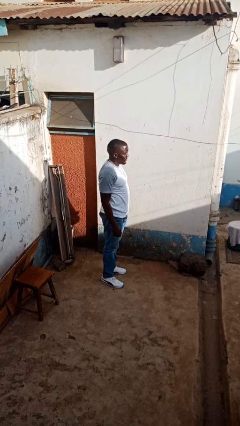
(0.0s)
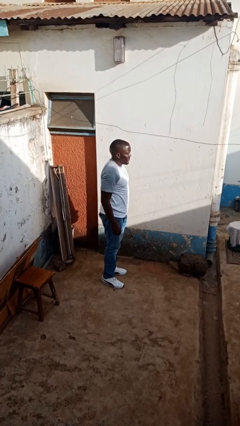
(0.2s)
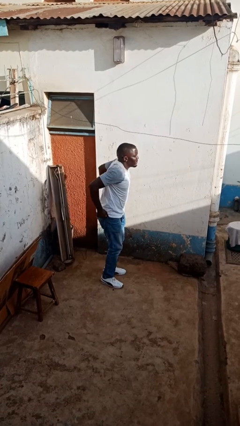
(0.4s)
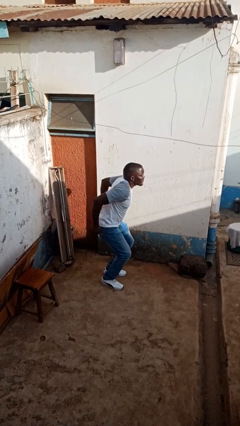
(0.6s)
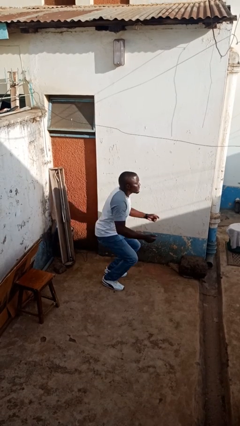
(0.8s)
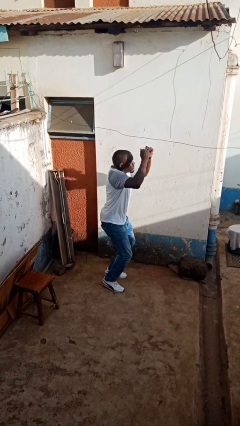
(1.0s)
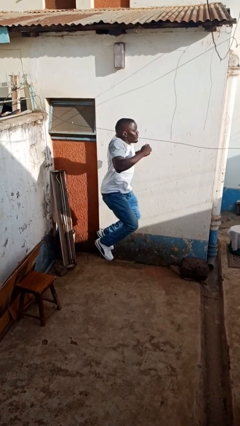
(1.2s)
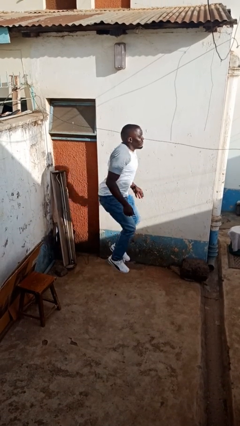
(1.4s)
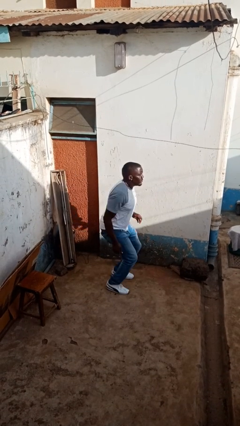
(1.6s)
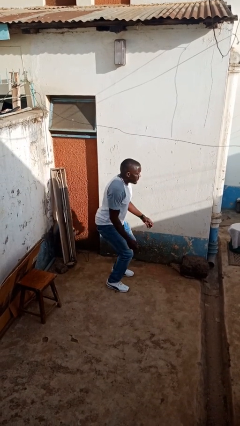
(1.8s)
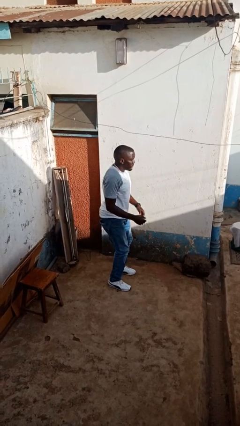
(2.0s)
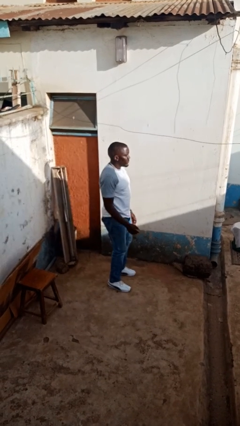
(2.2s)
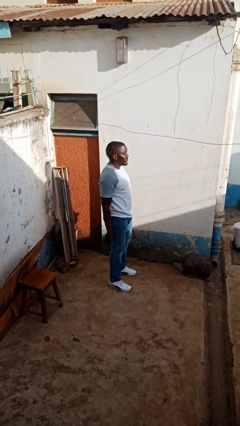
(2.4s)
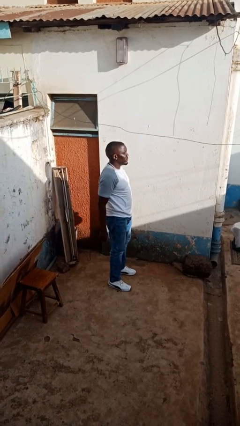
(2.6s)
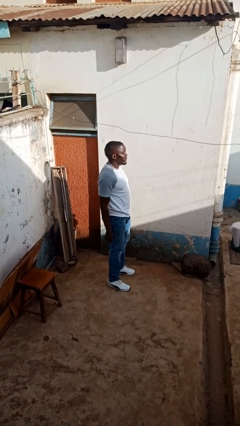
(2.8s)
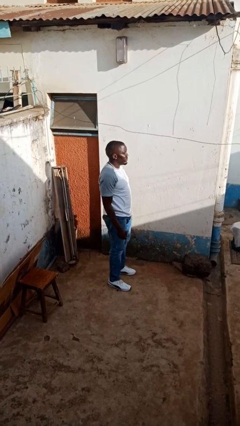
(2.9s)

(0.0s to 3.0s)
person jumps

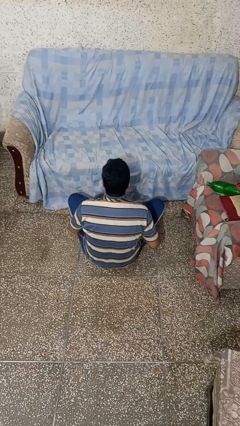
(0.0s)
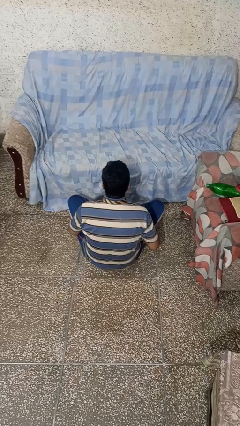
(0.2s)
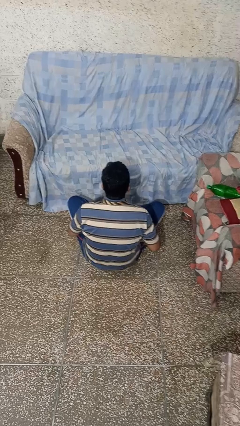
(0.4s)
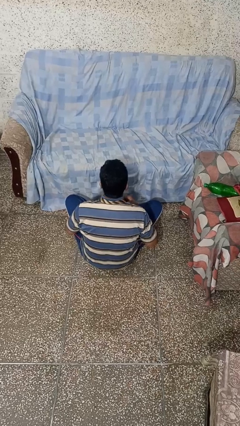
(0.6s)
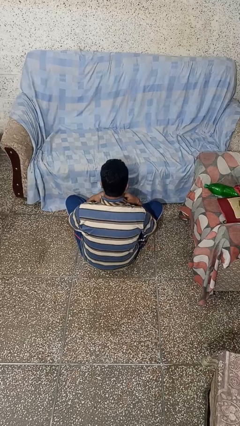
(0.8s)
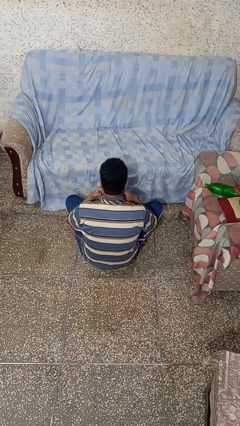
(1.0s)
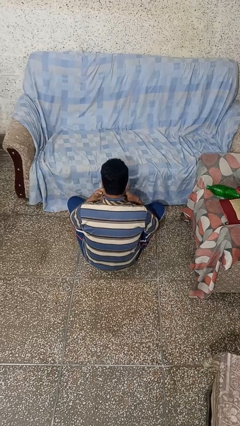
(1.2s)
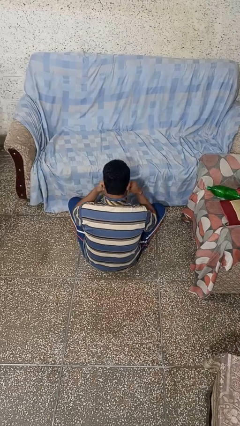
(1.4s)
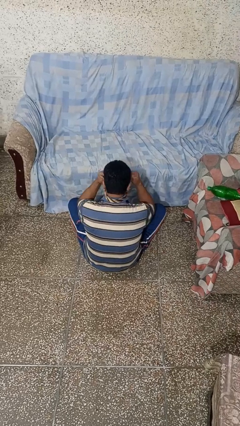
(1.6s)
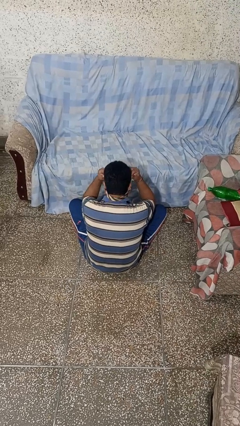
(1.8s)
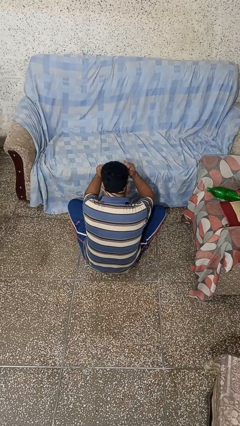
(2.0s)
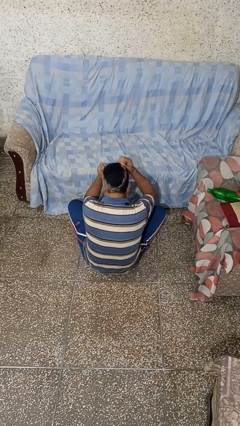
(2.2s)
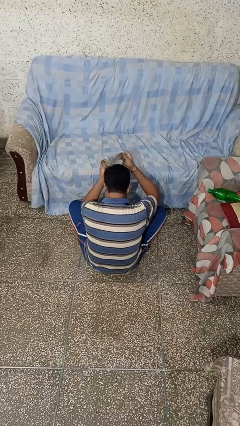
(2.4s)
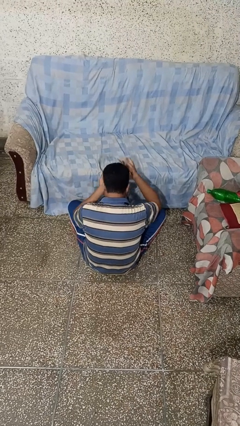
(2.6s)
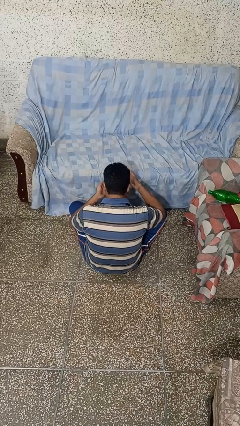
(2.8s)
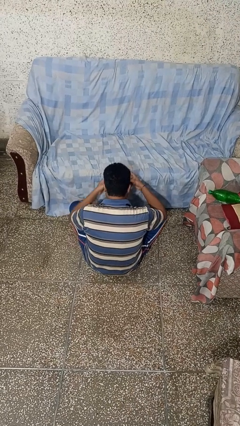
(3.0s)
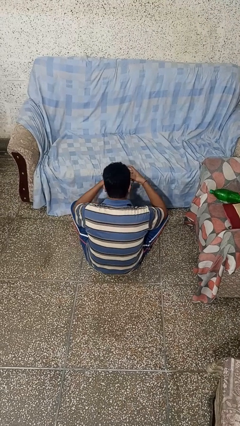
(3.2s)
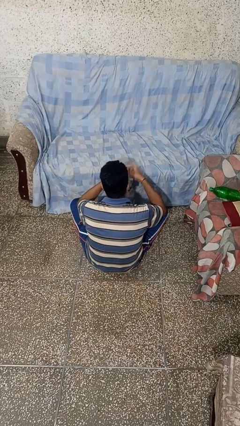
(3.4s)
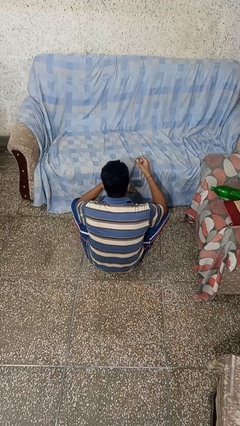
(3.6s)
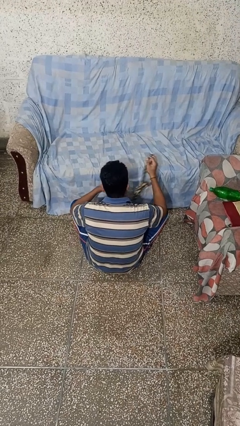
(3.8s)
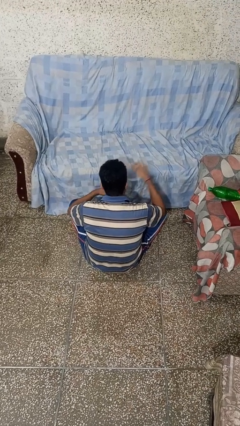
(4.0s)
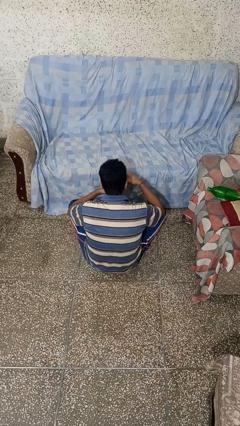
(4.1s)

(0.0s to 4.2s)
person takes off necktie

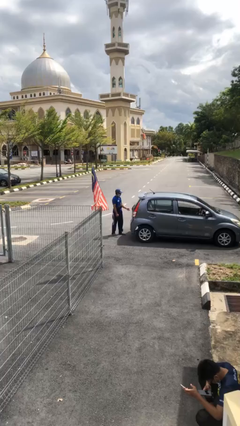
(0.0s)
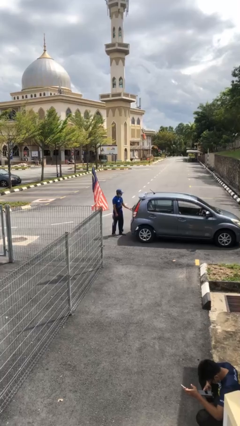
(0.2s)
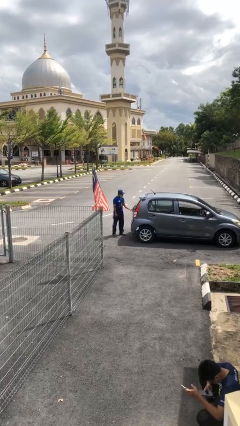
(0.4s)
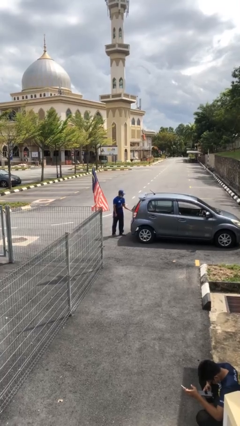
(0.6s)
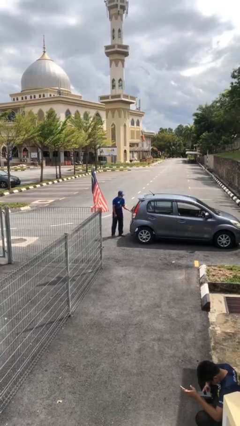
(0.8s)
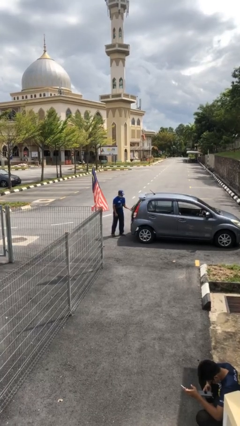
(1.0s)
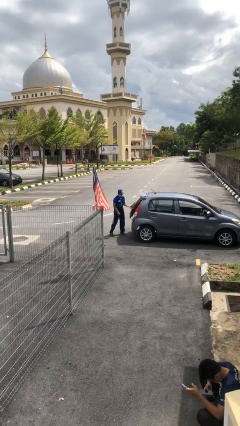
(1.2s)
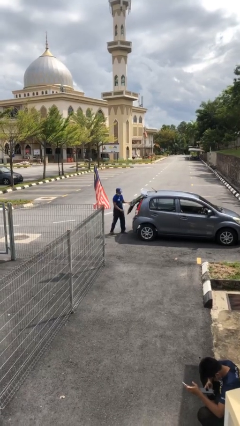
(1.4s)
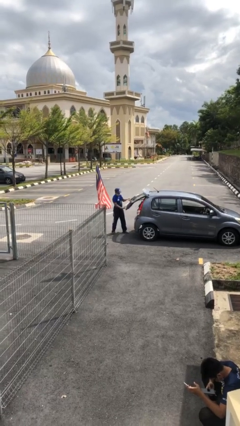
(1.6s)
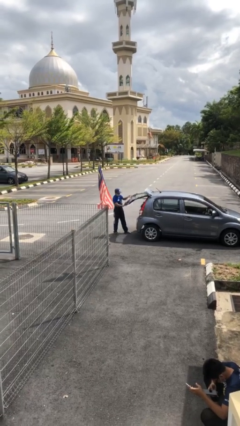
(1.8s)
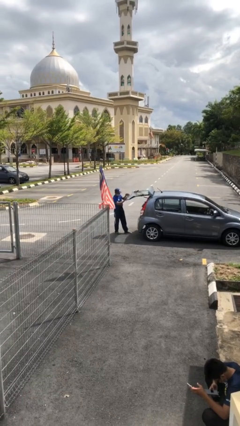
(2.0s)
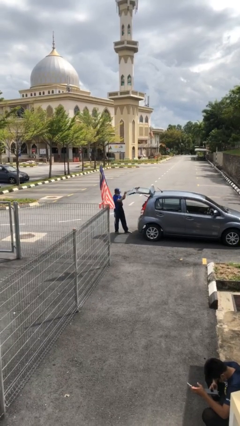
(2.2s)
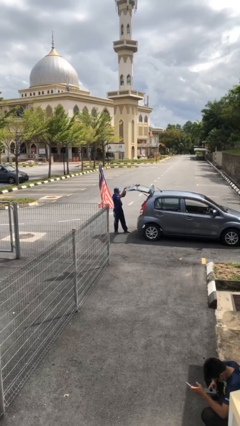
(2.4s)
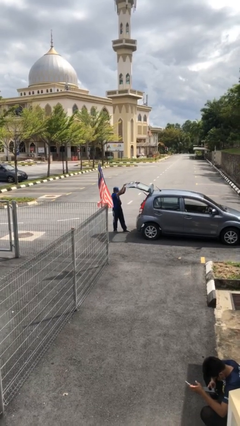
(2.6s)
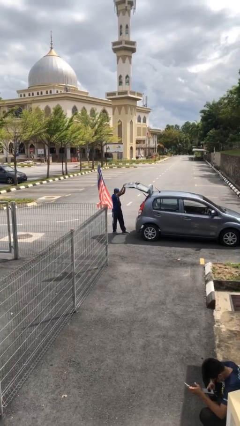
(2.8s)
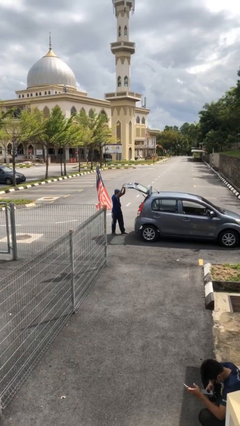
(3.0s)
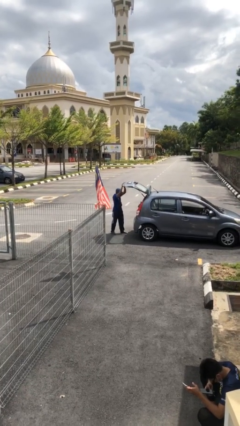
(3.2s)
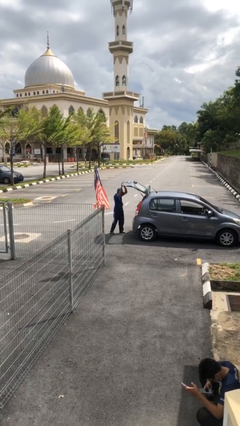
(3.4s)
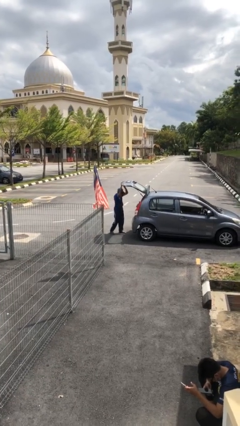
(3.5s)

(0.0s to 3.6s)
person opens car trunk

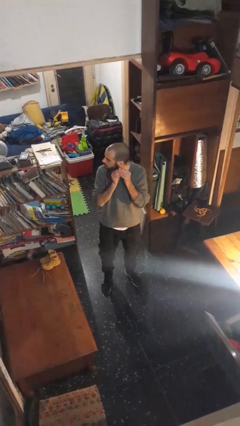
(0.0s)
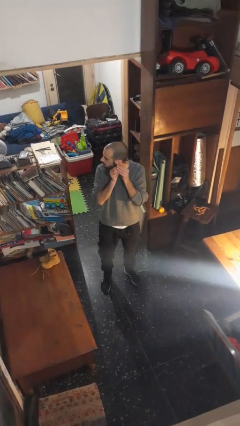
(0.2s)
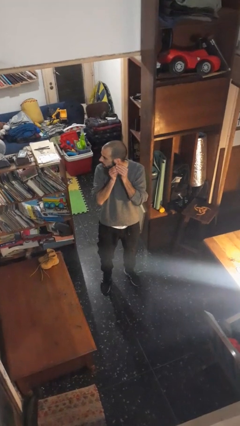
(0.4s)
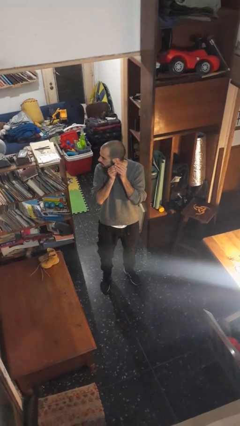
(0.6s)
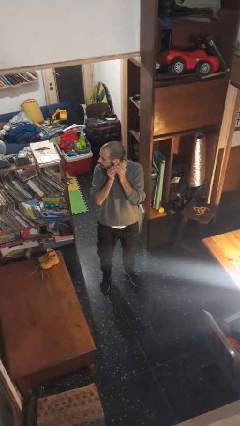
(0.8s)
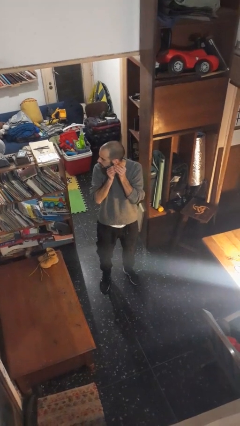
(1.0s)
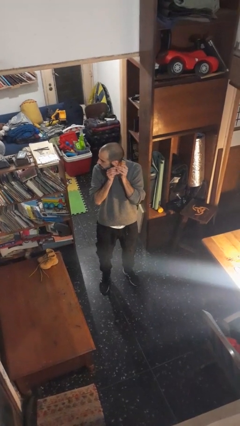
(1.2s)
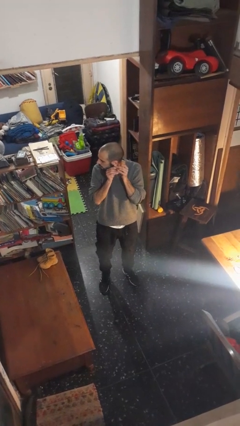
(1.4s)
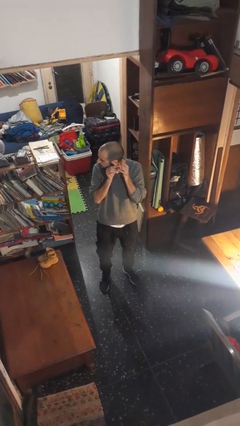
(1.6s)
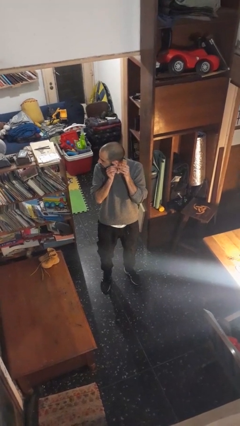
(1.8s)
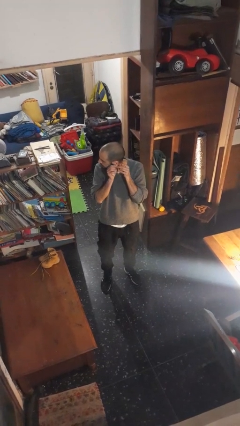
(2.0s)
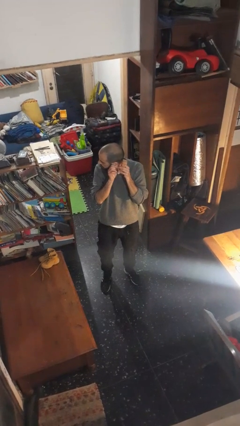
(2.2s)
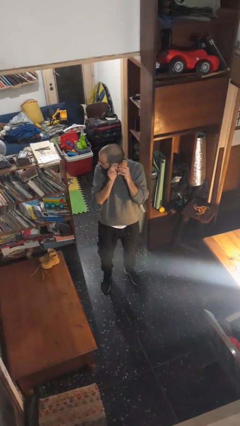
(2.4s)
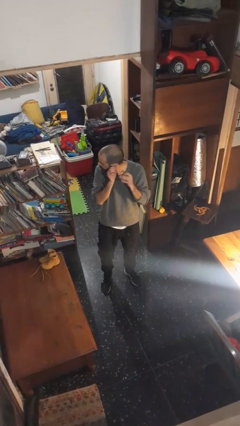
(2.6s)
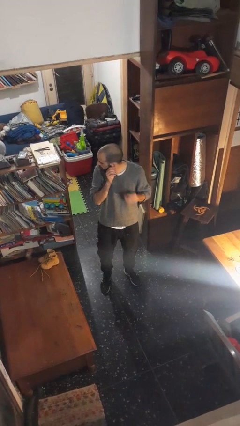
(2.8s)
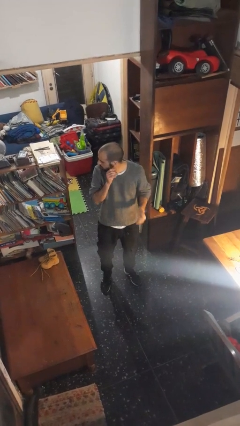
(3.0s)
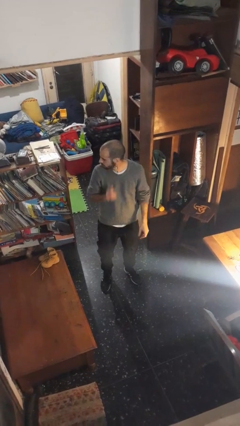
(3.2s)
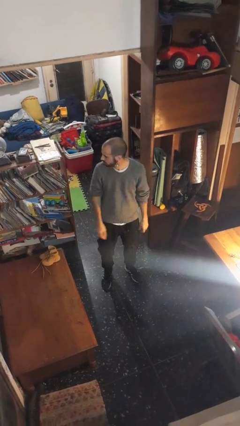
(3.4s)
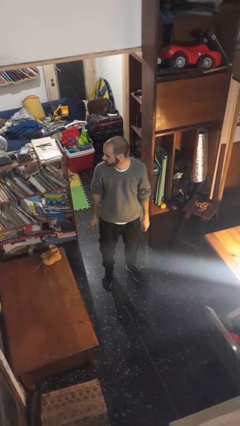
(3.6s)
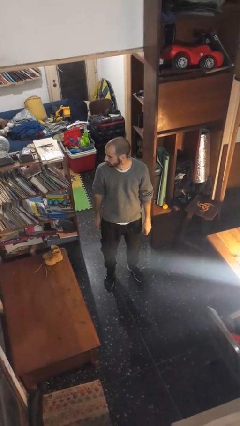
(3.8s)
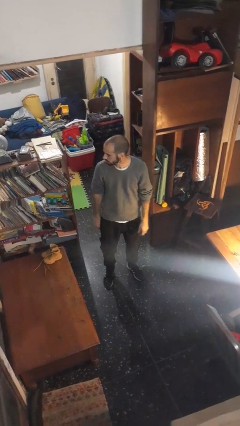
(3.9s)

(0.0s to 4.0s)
person puts on earrings

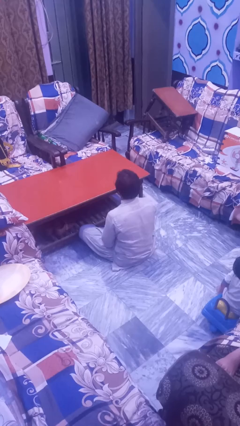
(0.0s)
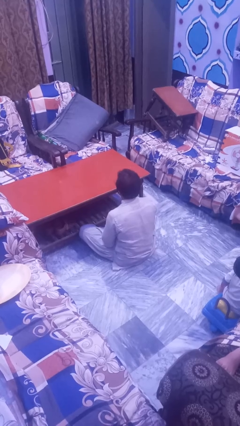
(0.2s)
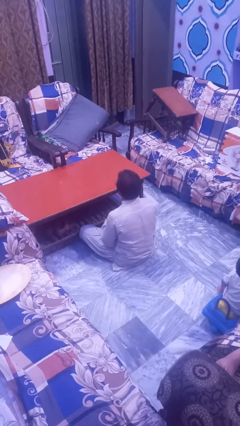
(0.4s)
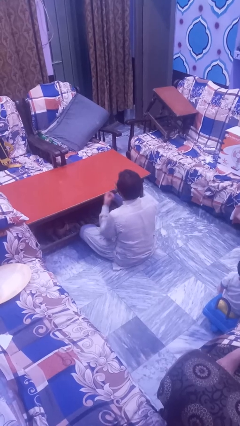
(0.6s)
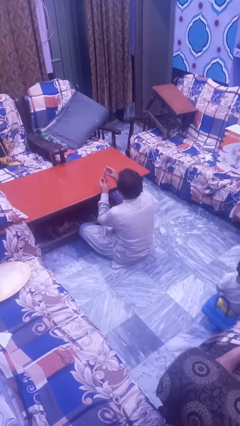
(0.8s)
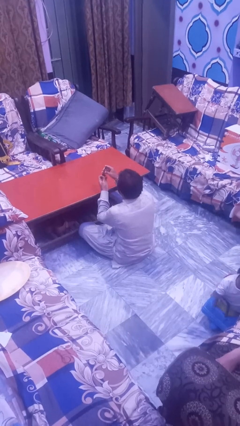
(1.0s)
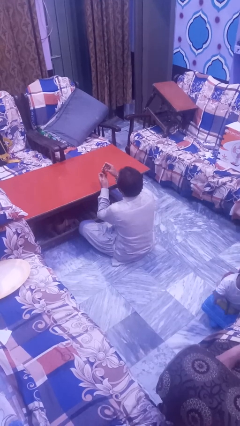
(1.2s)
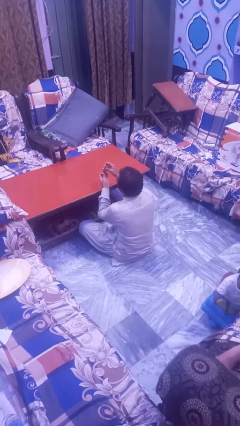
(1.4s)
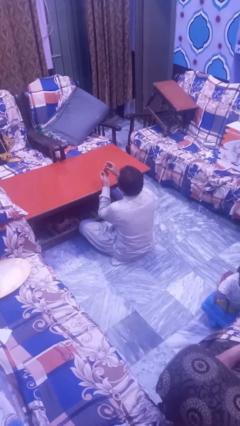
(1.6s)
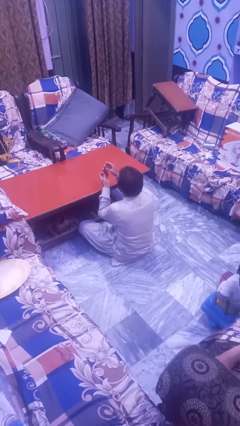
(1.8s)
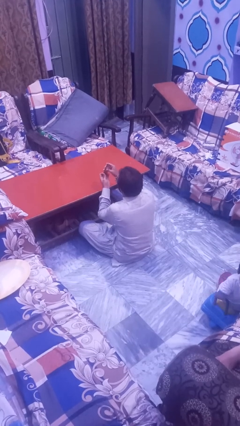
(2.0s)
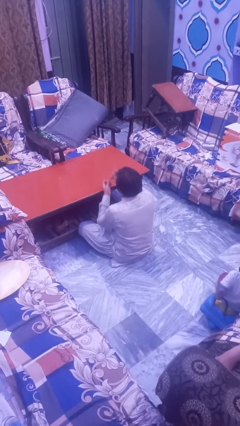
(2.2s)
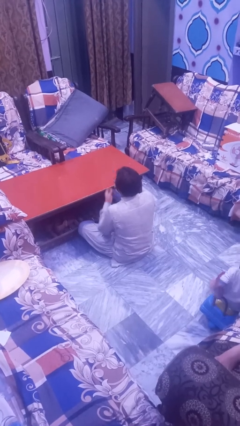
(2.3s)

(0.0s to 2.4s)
person clips fingernails

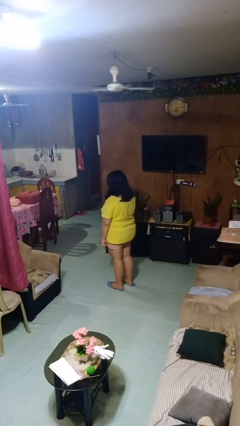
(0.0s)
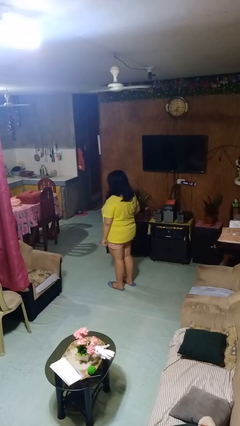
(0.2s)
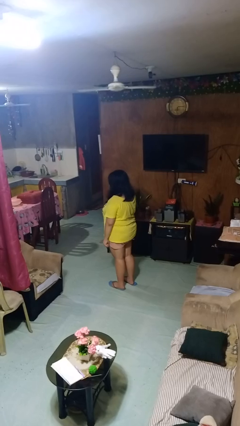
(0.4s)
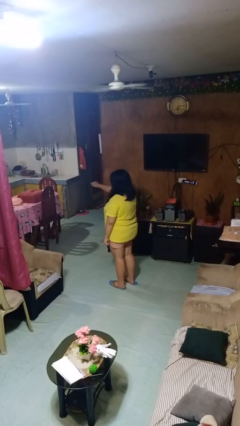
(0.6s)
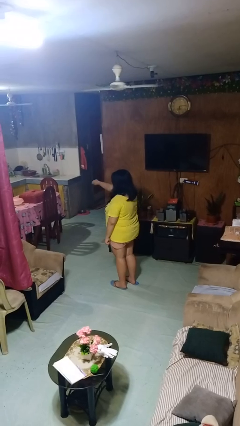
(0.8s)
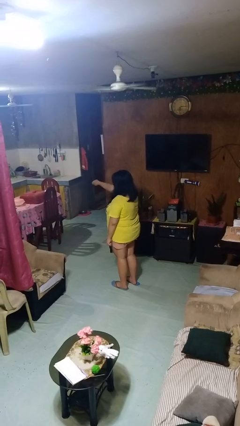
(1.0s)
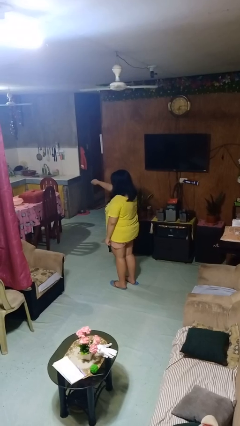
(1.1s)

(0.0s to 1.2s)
person punches
